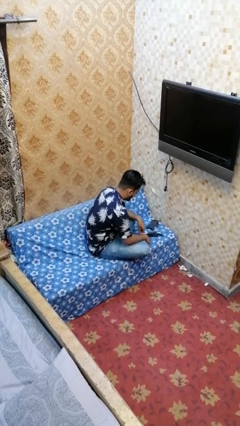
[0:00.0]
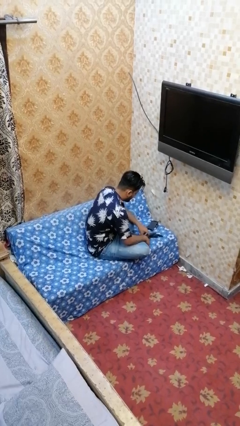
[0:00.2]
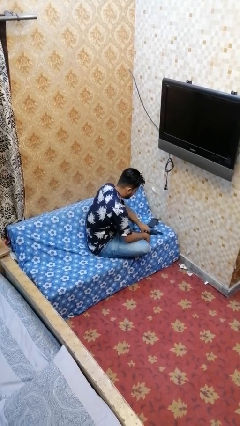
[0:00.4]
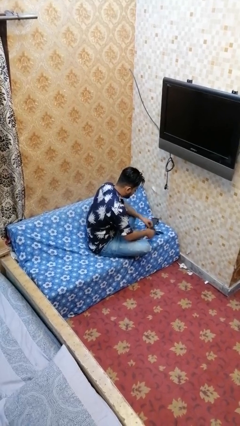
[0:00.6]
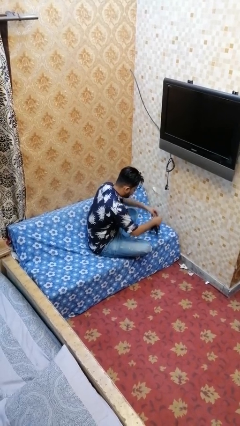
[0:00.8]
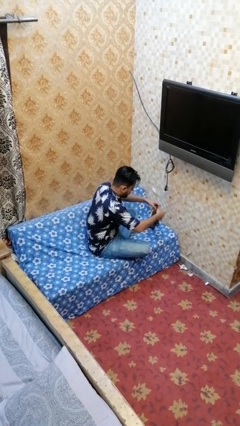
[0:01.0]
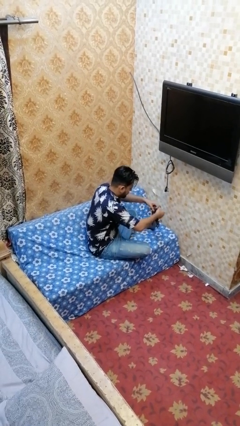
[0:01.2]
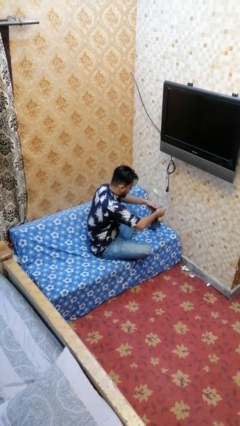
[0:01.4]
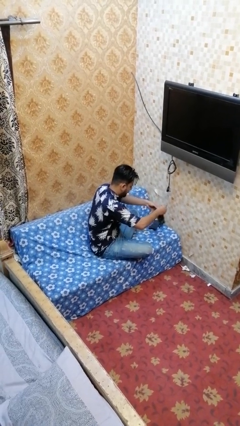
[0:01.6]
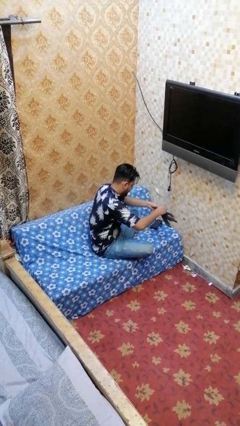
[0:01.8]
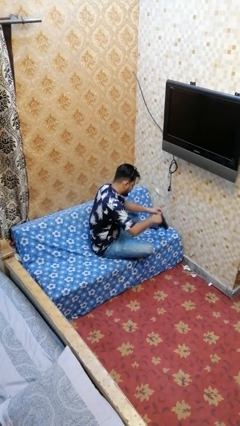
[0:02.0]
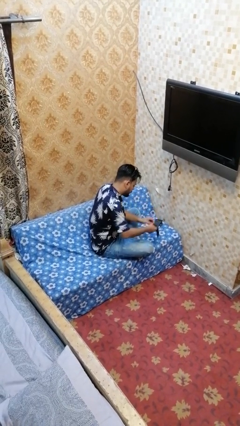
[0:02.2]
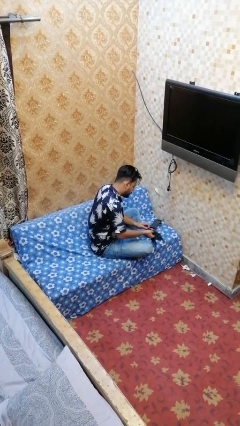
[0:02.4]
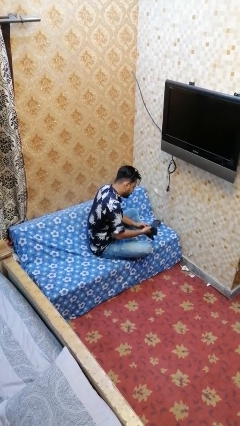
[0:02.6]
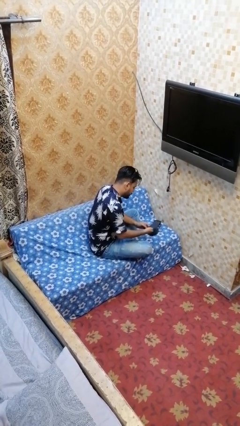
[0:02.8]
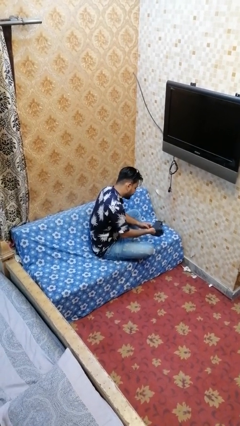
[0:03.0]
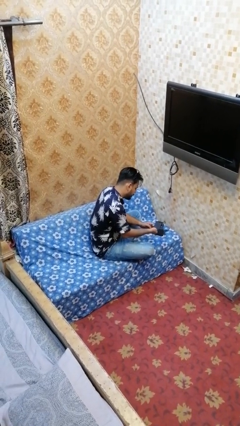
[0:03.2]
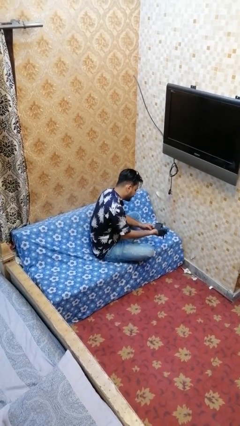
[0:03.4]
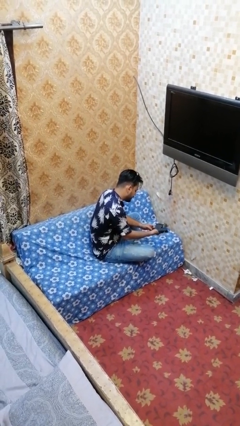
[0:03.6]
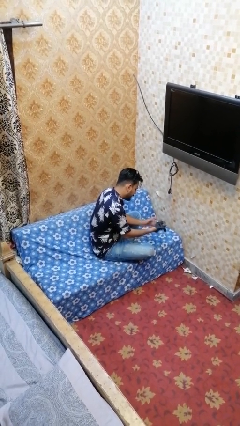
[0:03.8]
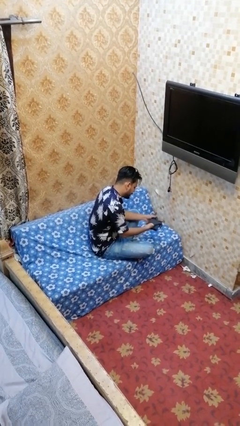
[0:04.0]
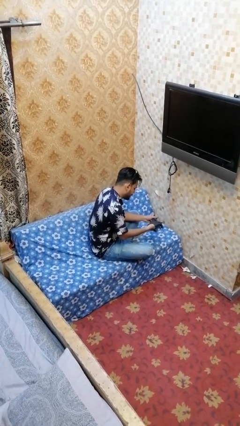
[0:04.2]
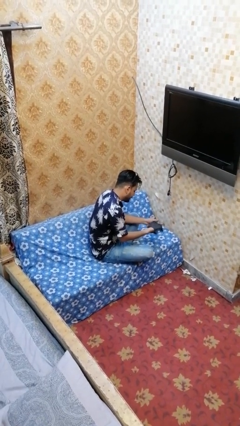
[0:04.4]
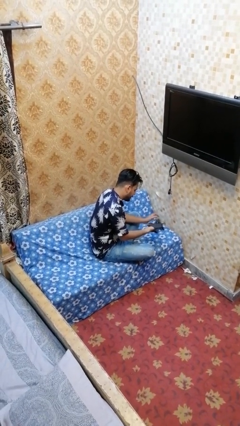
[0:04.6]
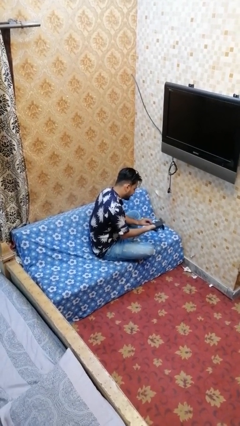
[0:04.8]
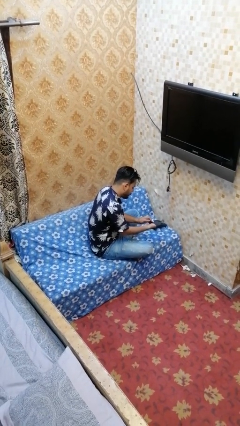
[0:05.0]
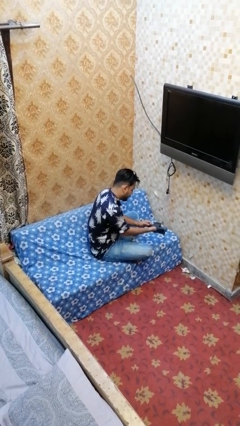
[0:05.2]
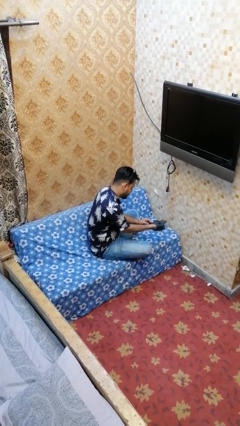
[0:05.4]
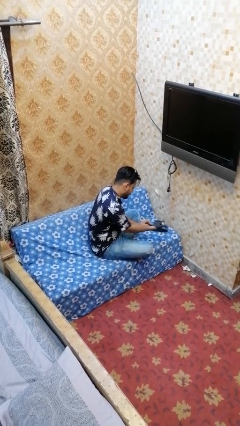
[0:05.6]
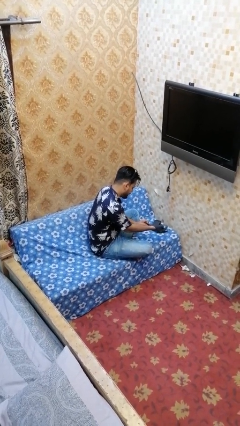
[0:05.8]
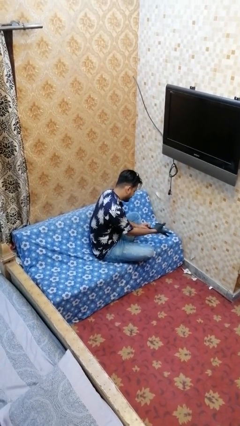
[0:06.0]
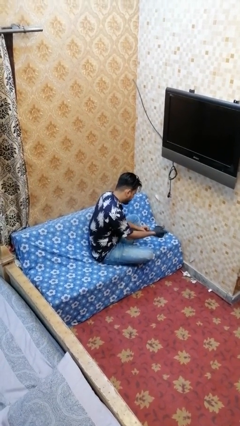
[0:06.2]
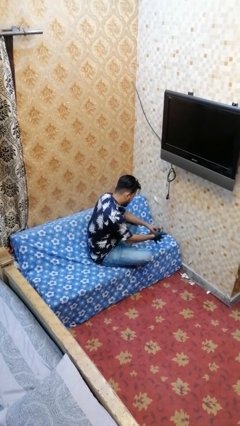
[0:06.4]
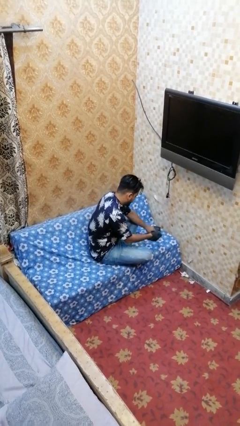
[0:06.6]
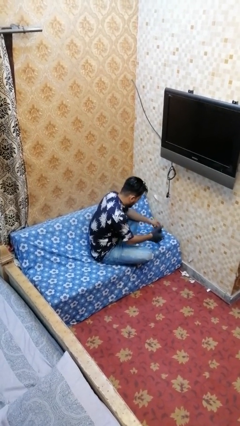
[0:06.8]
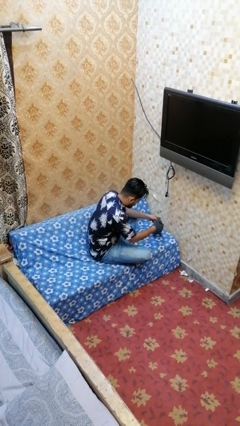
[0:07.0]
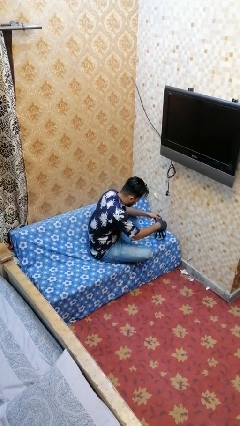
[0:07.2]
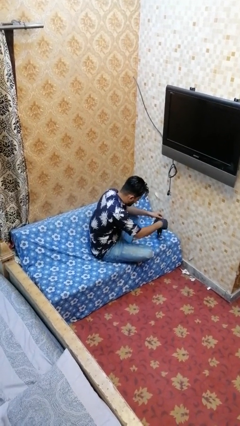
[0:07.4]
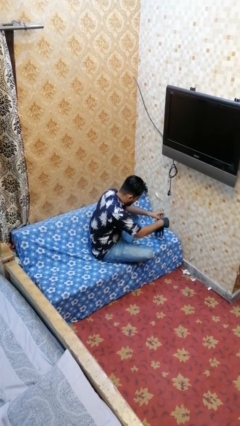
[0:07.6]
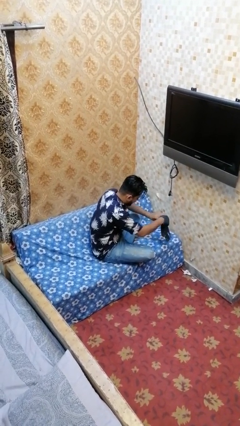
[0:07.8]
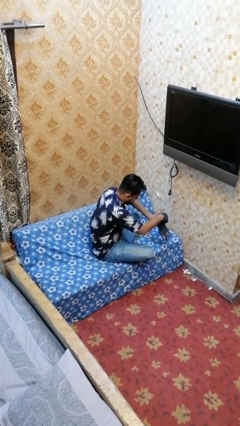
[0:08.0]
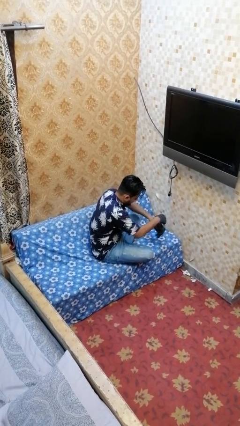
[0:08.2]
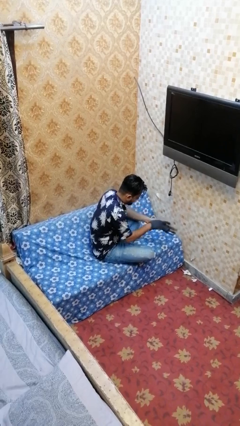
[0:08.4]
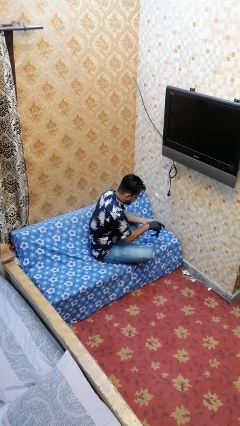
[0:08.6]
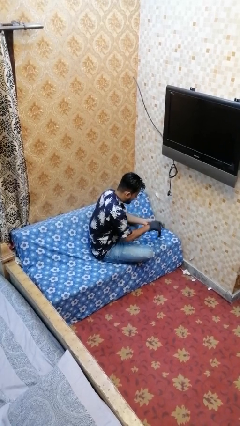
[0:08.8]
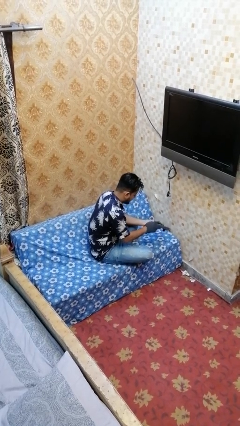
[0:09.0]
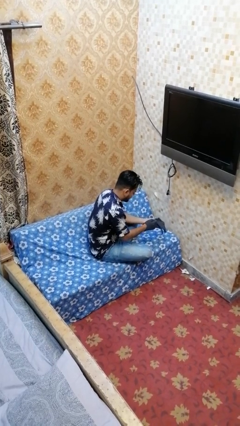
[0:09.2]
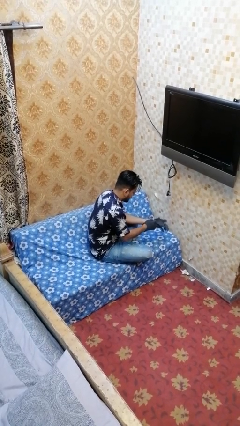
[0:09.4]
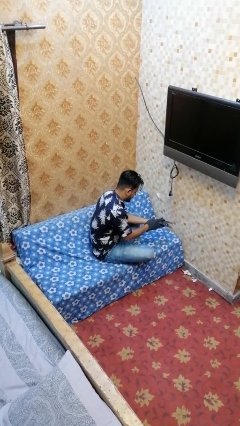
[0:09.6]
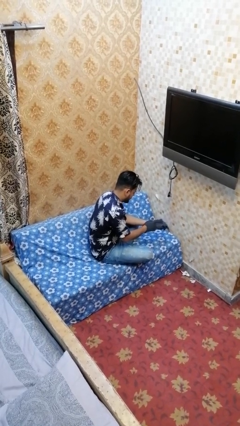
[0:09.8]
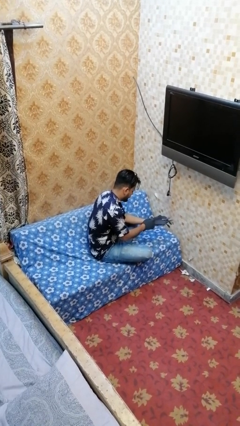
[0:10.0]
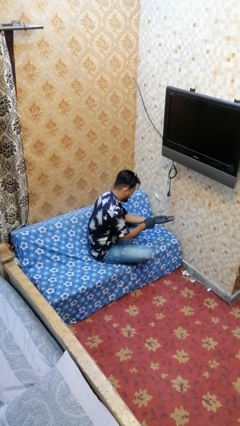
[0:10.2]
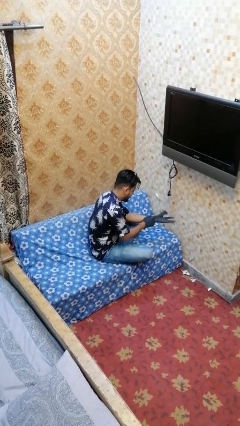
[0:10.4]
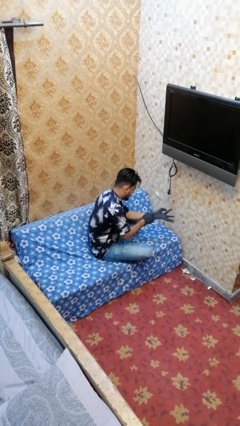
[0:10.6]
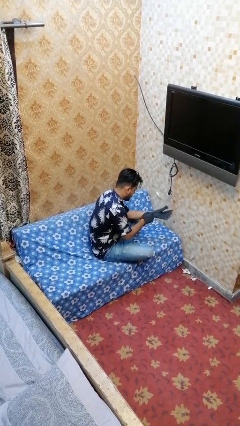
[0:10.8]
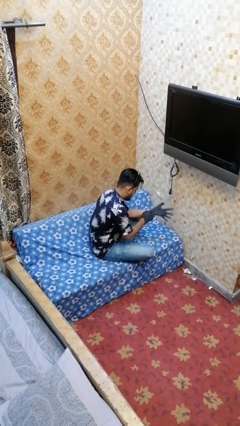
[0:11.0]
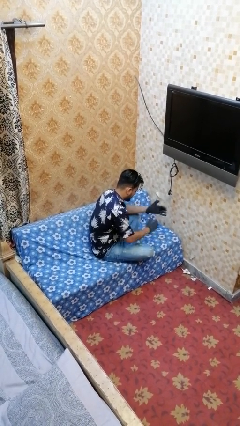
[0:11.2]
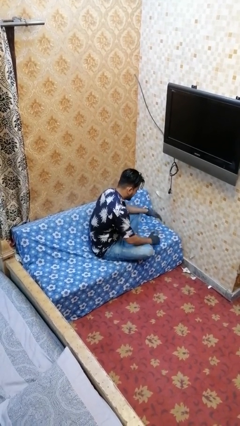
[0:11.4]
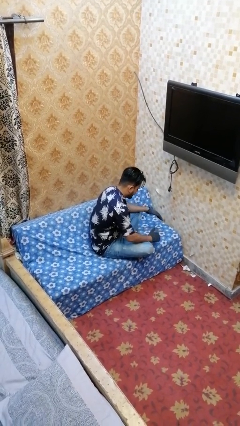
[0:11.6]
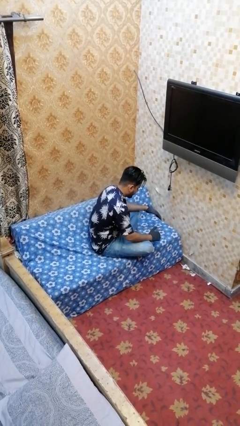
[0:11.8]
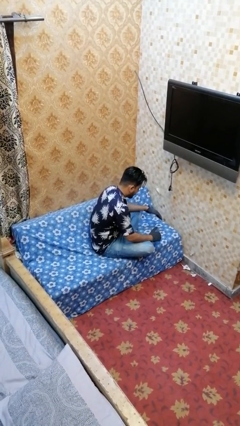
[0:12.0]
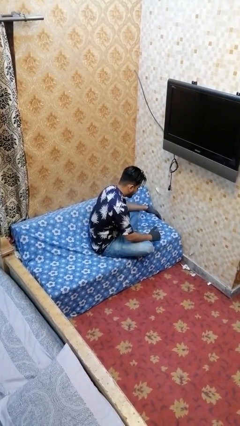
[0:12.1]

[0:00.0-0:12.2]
person puts on gloves

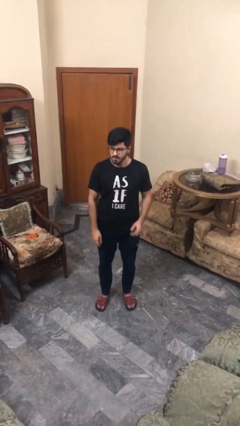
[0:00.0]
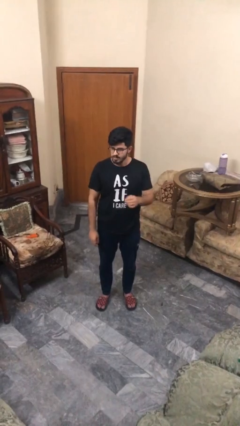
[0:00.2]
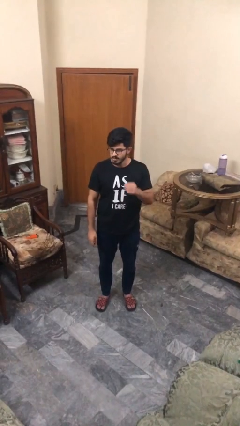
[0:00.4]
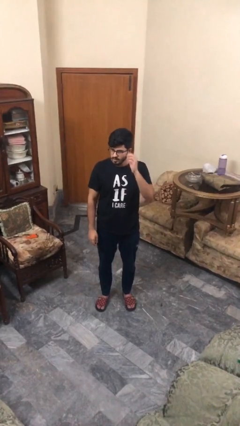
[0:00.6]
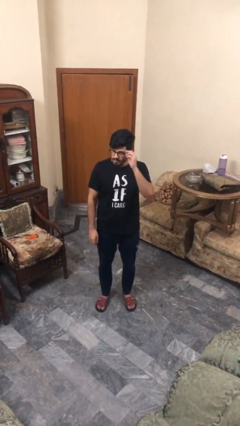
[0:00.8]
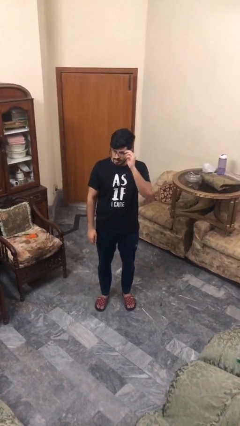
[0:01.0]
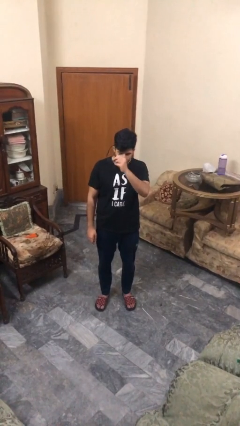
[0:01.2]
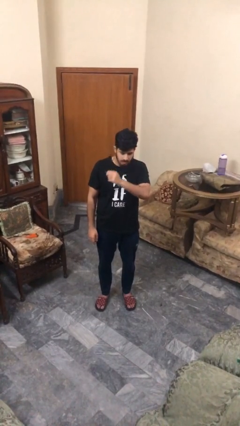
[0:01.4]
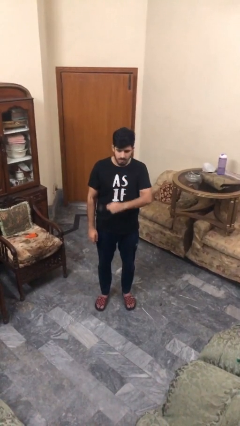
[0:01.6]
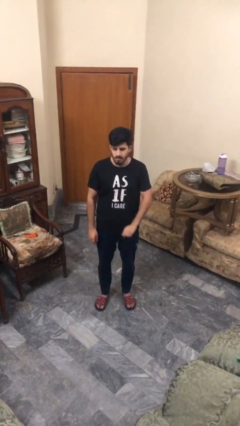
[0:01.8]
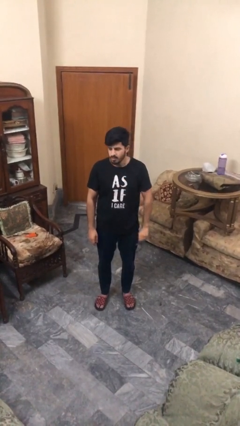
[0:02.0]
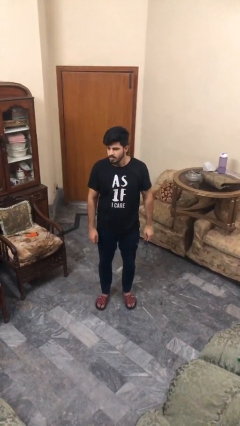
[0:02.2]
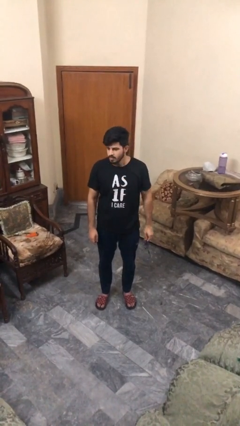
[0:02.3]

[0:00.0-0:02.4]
person takes off glasses

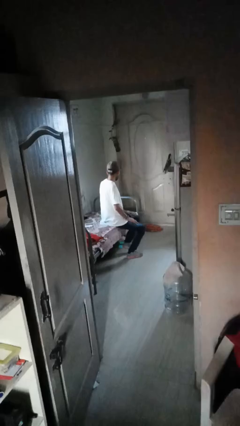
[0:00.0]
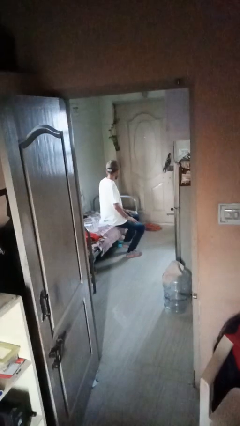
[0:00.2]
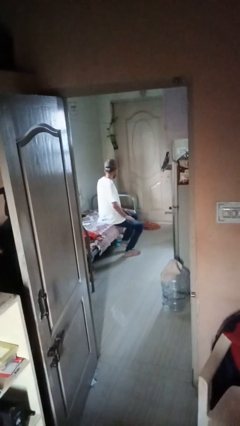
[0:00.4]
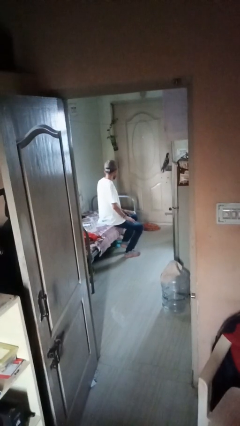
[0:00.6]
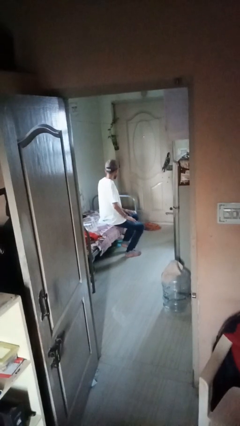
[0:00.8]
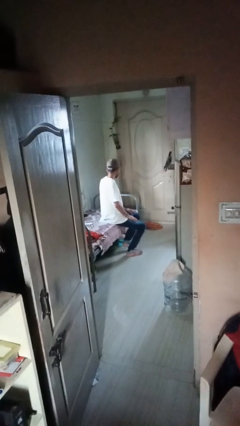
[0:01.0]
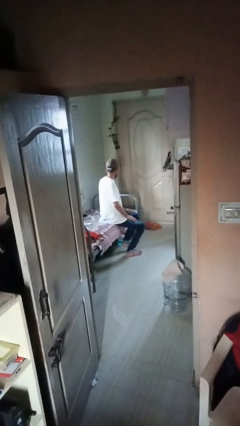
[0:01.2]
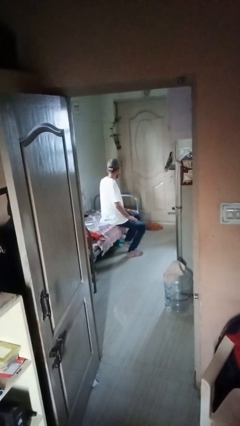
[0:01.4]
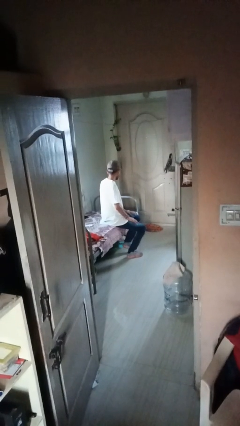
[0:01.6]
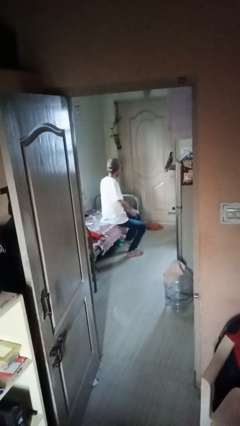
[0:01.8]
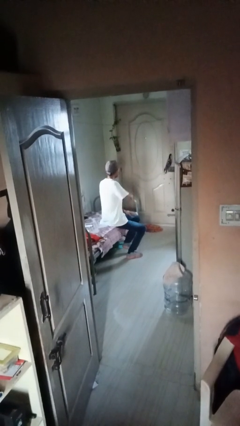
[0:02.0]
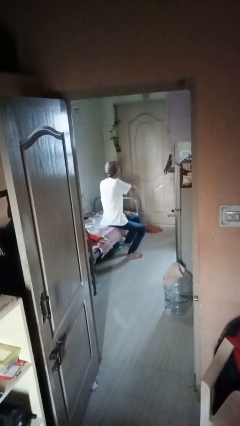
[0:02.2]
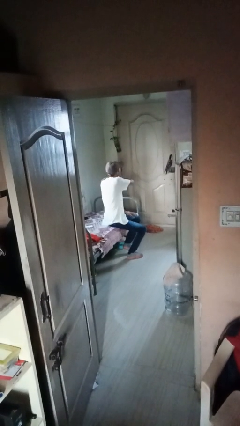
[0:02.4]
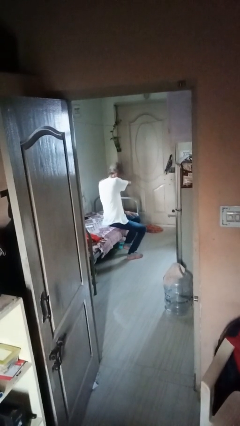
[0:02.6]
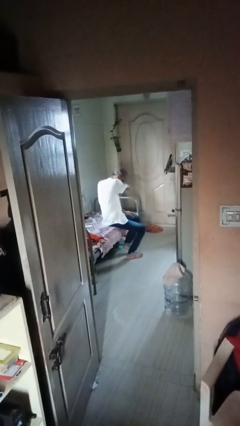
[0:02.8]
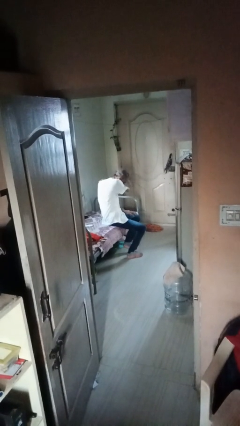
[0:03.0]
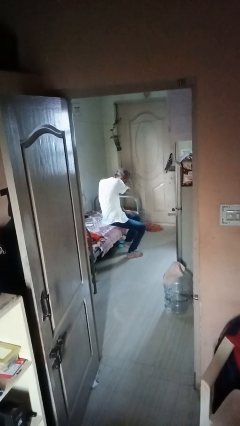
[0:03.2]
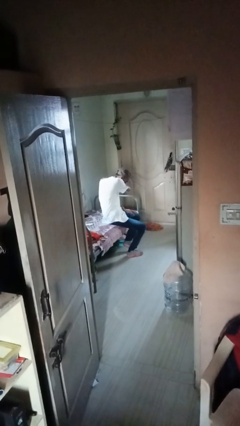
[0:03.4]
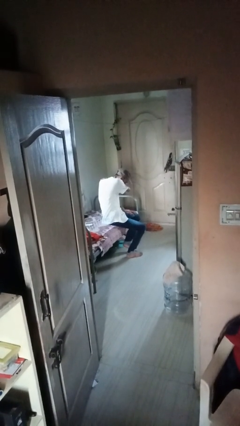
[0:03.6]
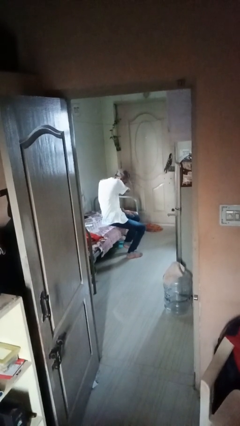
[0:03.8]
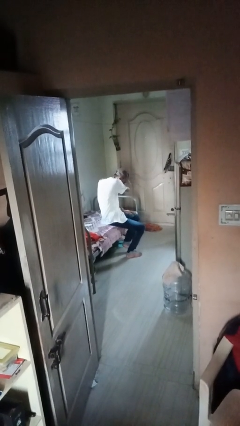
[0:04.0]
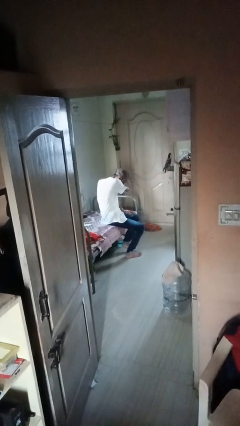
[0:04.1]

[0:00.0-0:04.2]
person sneezes into arm
